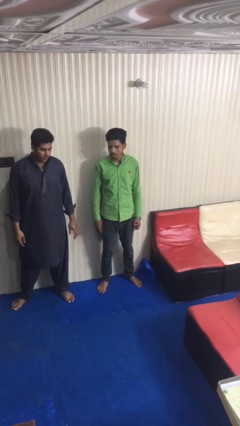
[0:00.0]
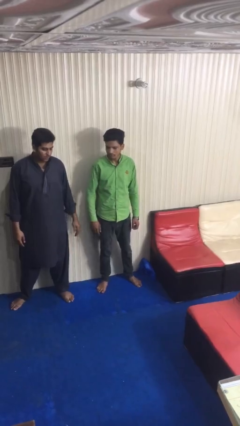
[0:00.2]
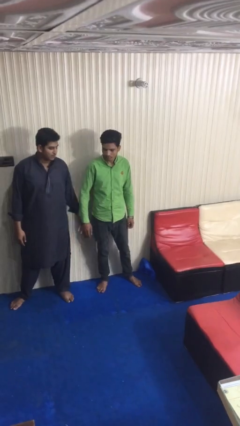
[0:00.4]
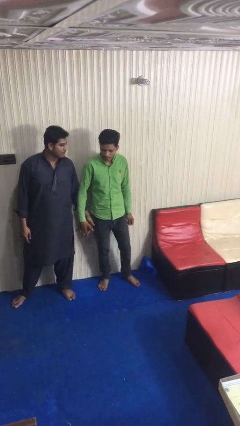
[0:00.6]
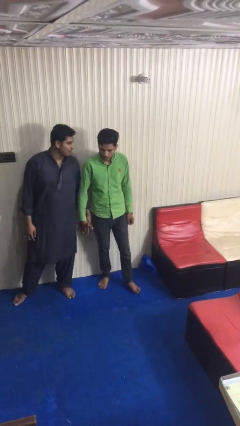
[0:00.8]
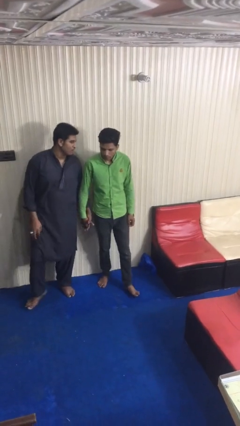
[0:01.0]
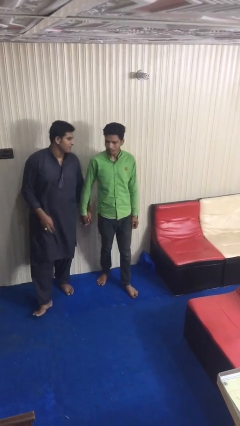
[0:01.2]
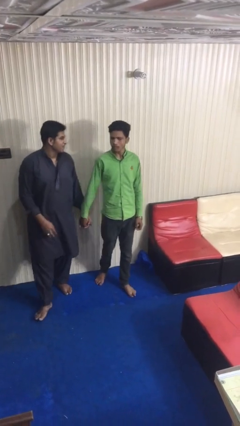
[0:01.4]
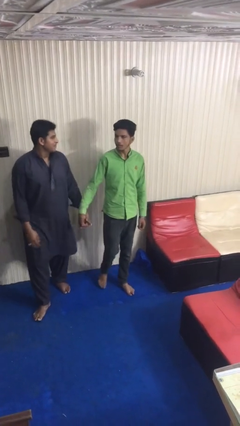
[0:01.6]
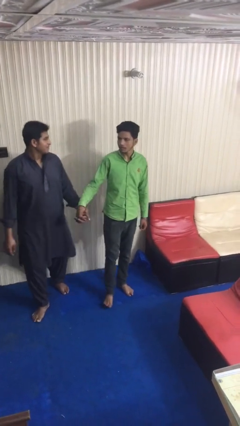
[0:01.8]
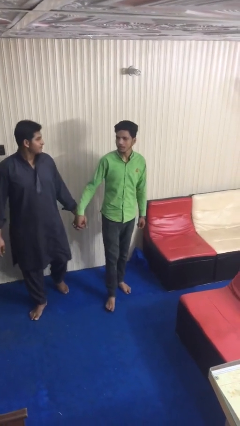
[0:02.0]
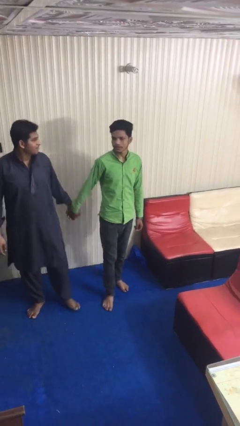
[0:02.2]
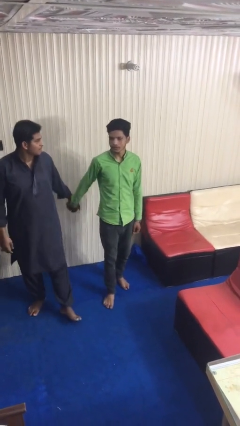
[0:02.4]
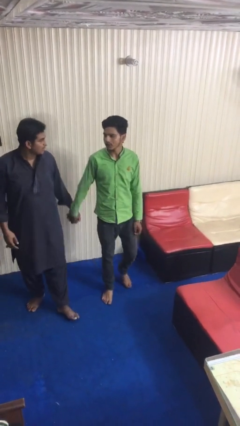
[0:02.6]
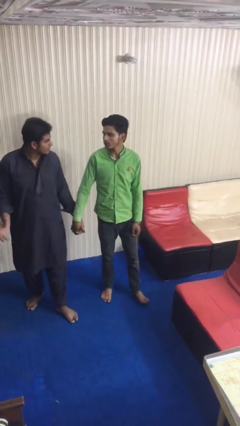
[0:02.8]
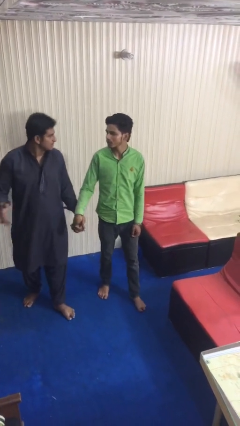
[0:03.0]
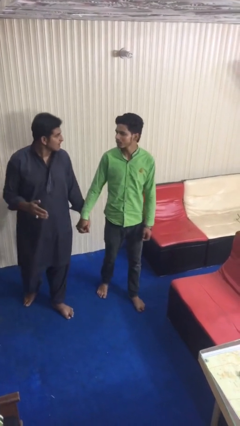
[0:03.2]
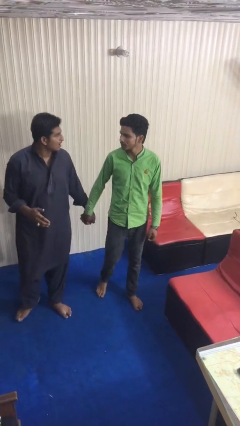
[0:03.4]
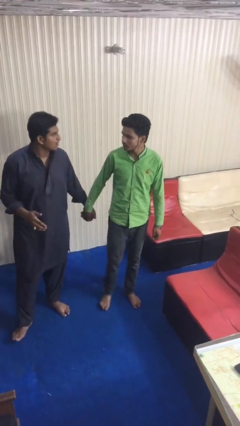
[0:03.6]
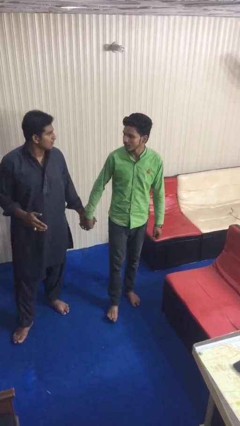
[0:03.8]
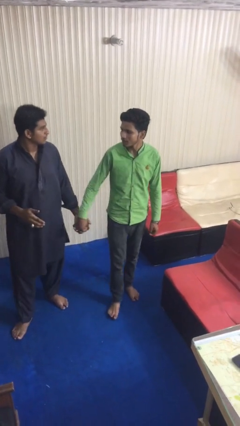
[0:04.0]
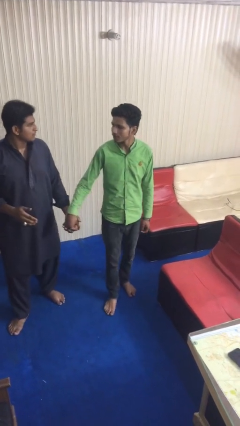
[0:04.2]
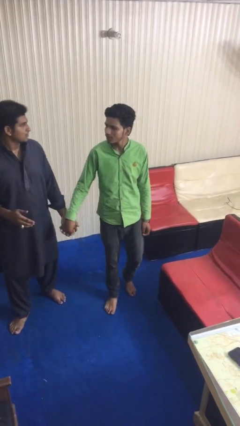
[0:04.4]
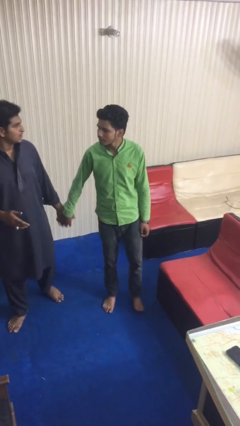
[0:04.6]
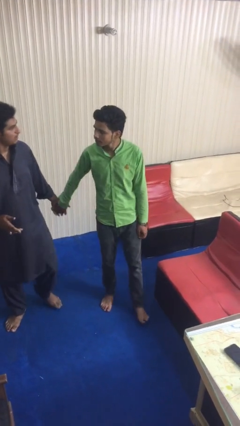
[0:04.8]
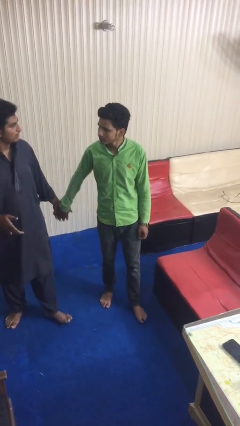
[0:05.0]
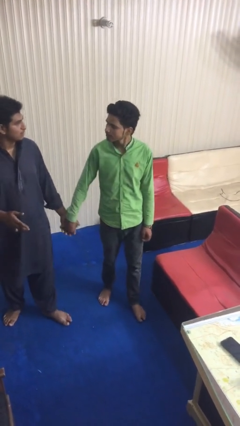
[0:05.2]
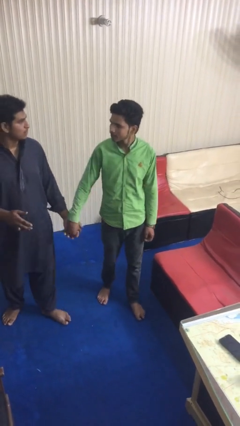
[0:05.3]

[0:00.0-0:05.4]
person holds hand

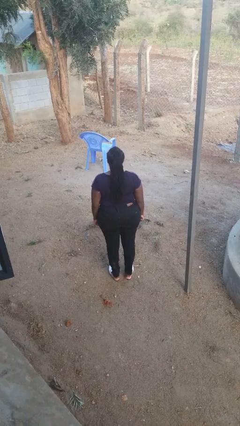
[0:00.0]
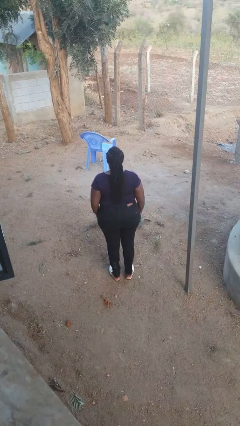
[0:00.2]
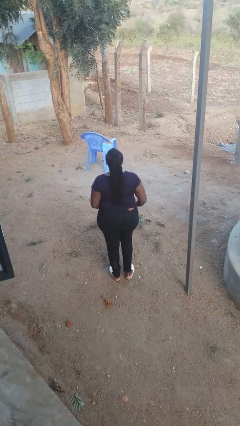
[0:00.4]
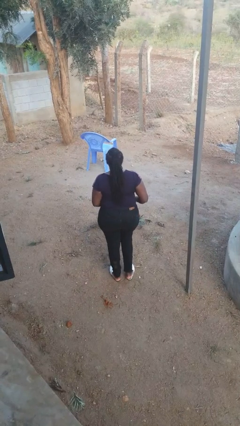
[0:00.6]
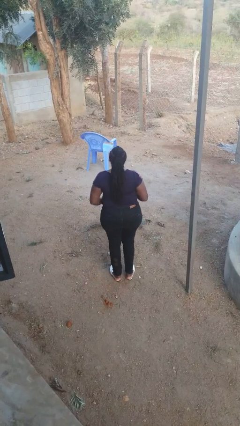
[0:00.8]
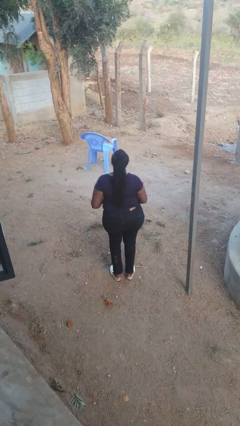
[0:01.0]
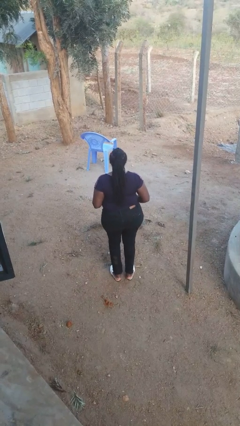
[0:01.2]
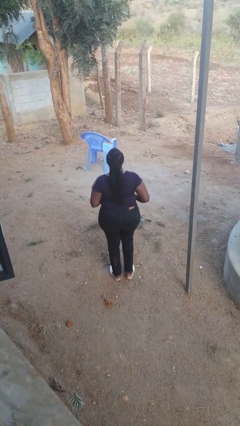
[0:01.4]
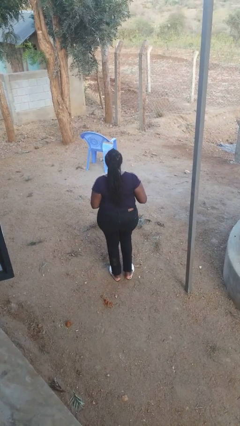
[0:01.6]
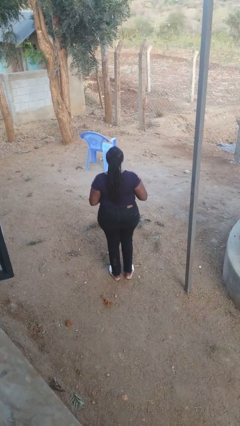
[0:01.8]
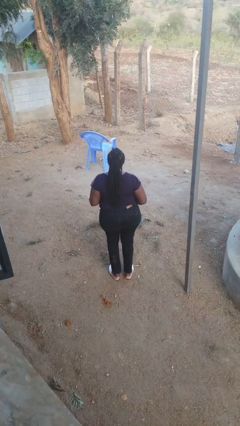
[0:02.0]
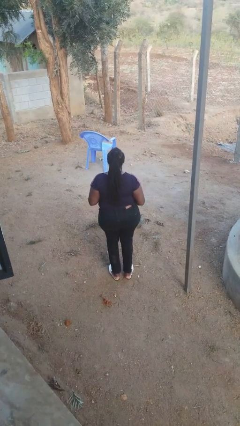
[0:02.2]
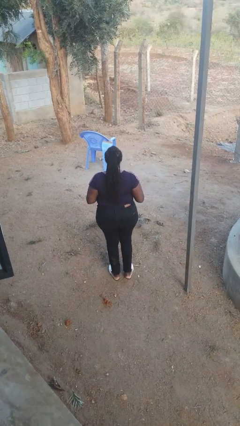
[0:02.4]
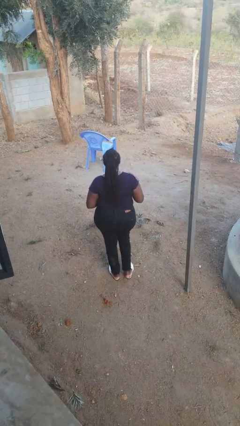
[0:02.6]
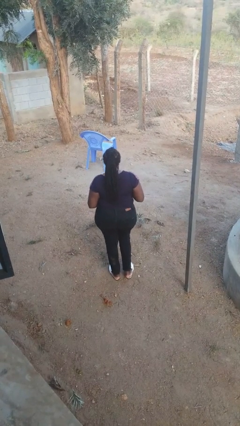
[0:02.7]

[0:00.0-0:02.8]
person wiggles hips

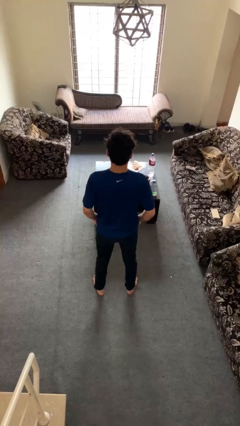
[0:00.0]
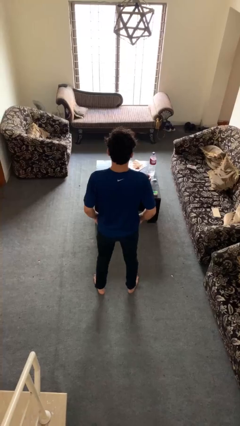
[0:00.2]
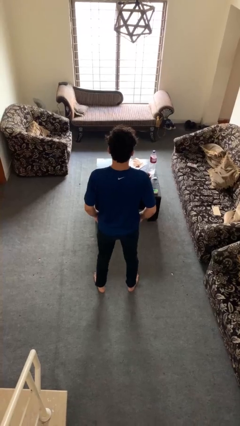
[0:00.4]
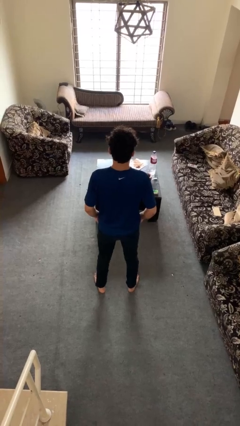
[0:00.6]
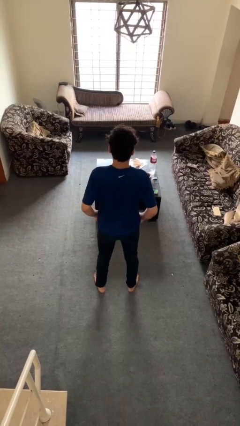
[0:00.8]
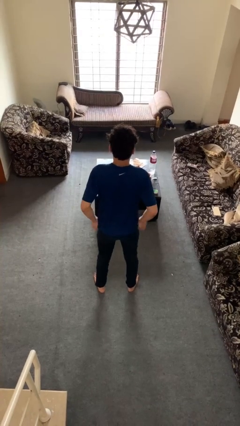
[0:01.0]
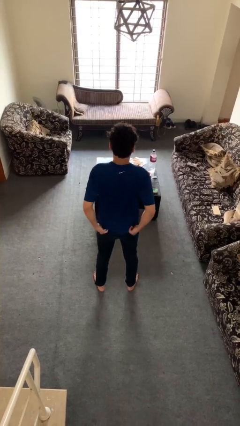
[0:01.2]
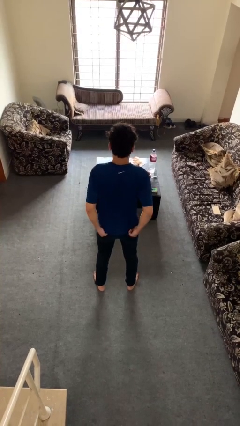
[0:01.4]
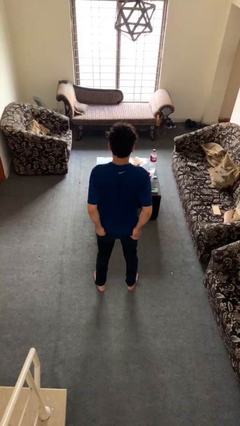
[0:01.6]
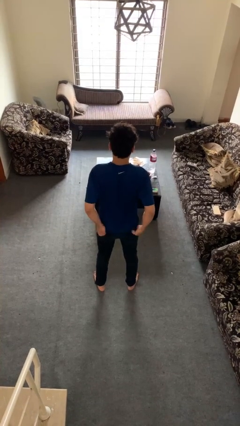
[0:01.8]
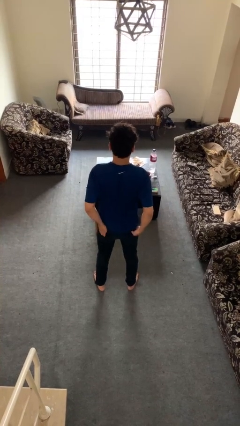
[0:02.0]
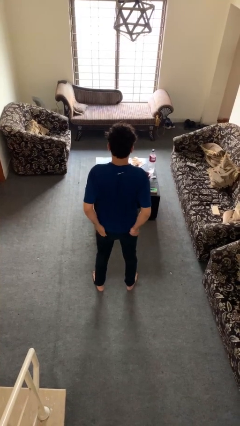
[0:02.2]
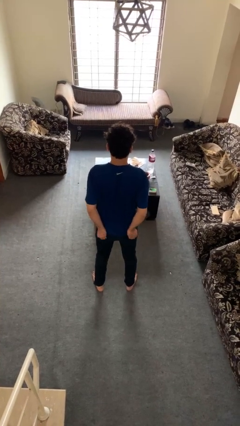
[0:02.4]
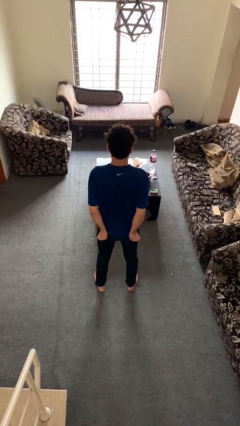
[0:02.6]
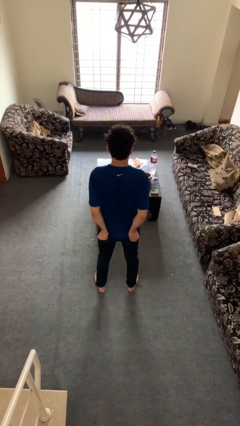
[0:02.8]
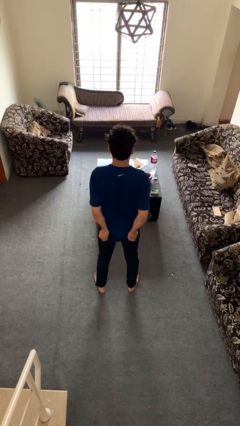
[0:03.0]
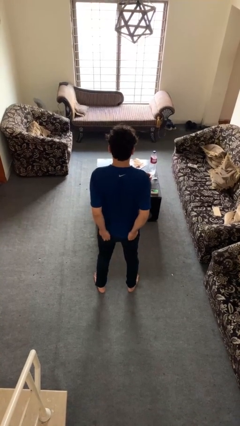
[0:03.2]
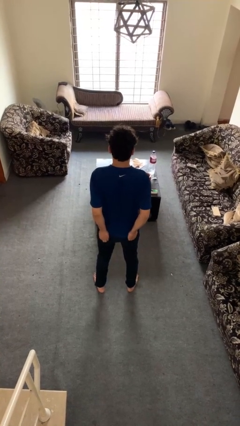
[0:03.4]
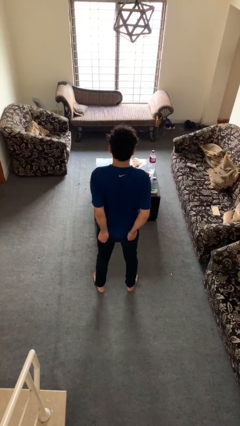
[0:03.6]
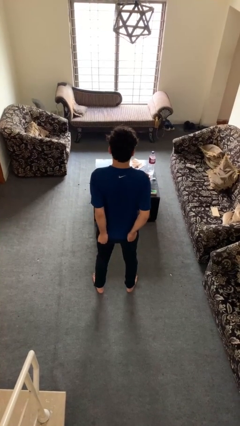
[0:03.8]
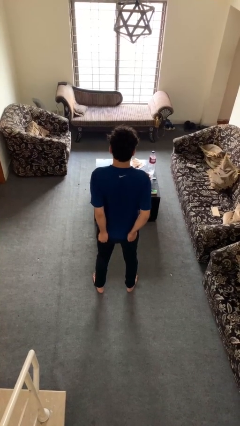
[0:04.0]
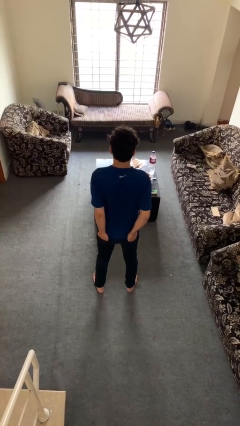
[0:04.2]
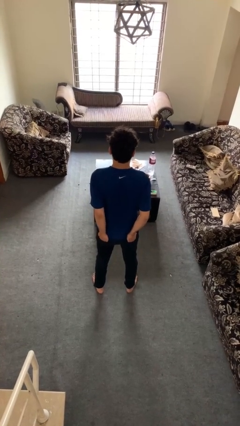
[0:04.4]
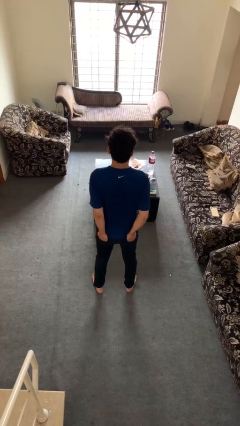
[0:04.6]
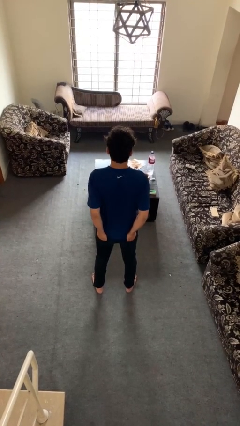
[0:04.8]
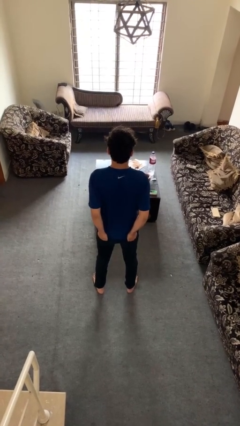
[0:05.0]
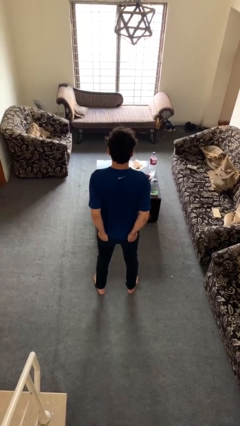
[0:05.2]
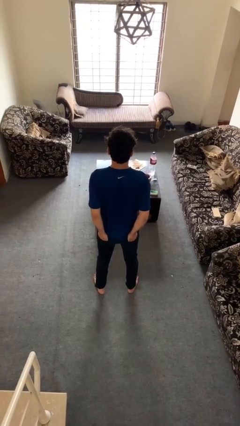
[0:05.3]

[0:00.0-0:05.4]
person puts hands in back pockets

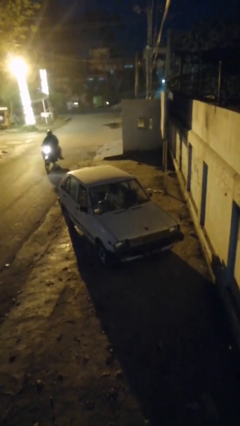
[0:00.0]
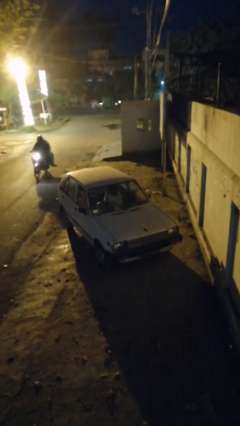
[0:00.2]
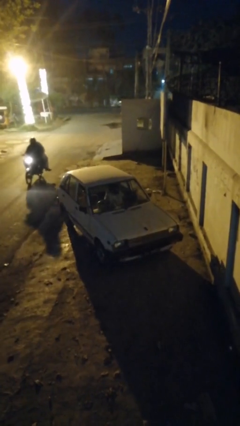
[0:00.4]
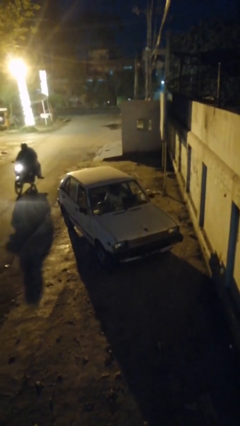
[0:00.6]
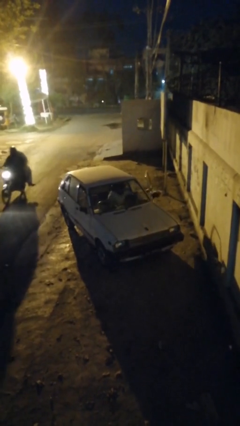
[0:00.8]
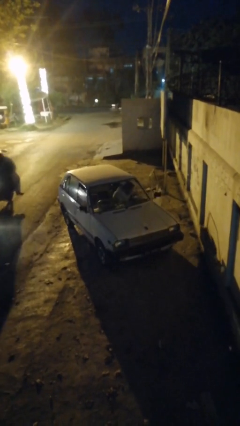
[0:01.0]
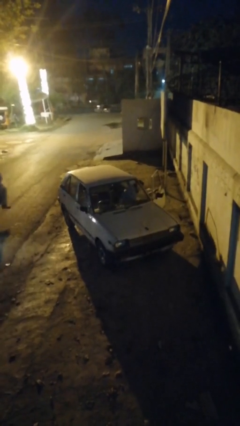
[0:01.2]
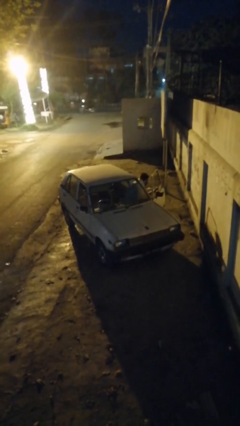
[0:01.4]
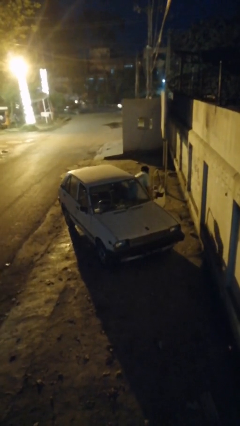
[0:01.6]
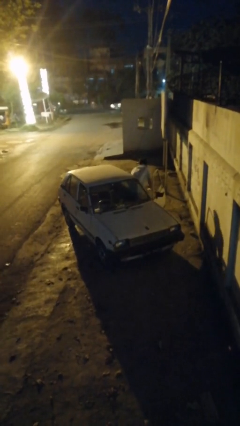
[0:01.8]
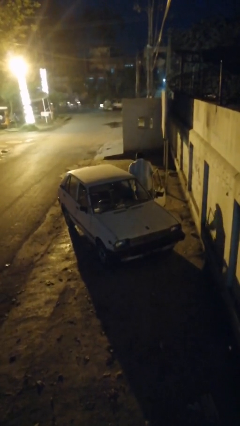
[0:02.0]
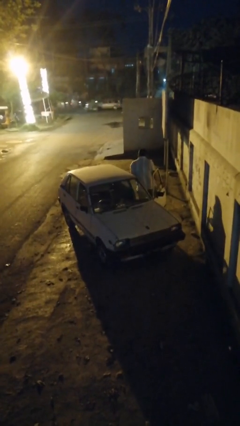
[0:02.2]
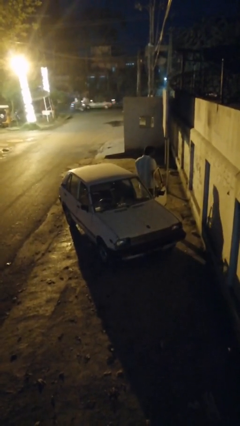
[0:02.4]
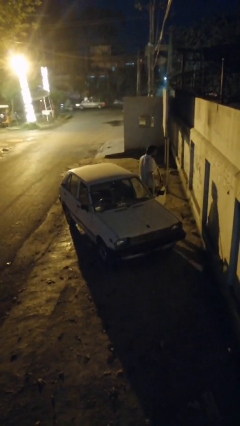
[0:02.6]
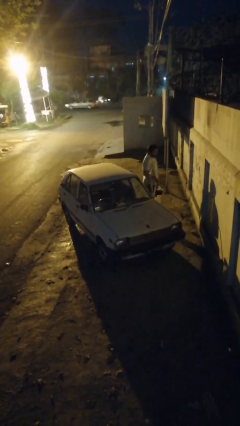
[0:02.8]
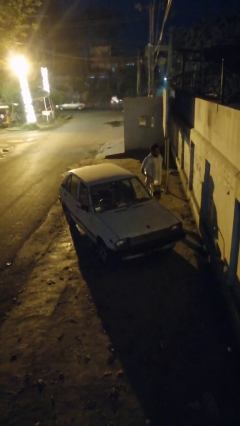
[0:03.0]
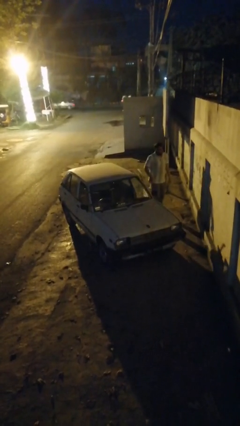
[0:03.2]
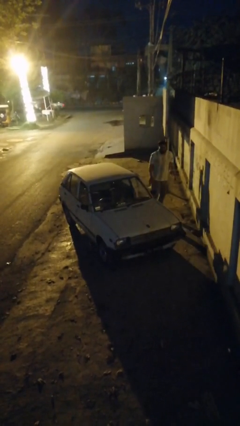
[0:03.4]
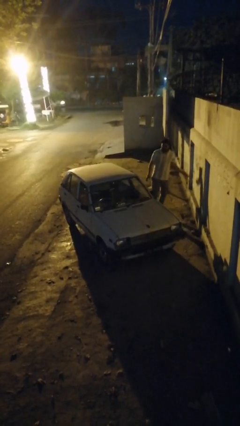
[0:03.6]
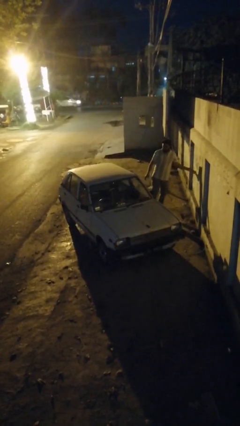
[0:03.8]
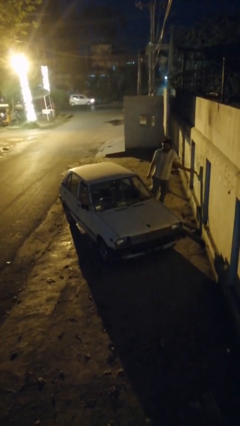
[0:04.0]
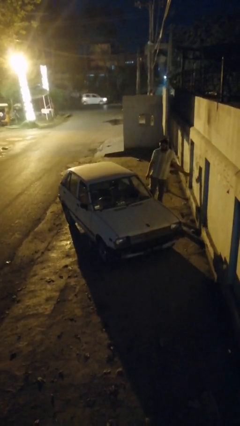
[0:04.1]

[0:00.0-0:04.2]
car drops off person
